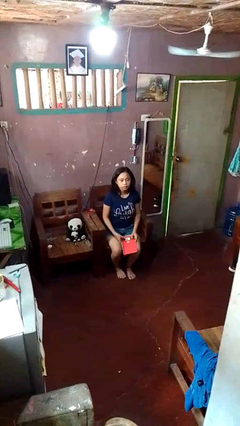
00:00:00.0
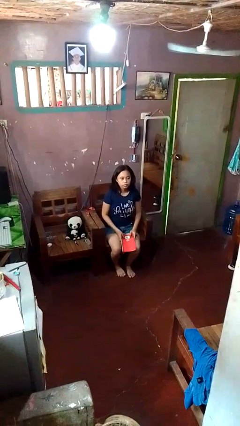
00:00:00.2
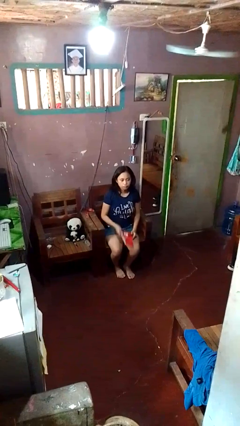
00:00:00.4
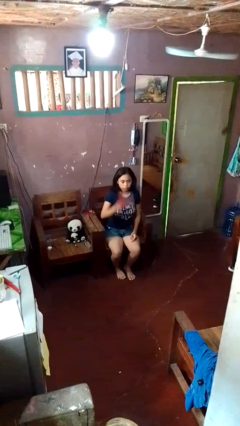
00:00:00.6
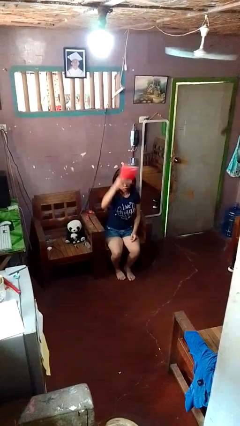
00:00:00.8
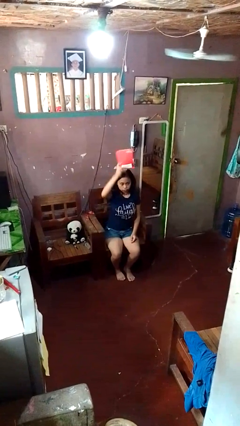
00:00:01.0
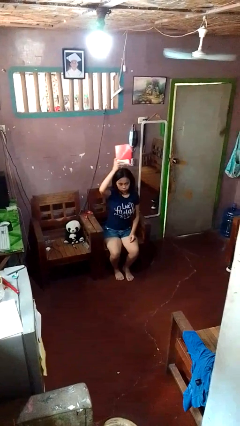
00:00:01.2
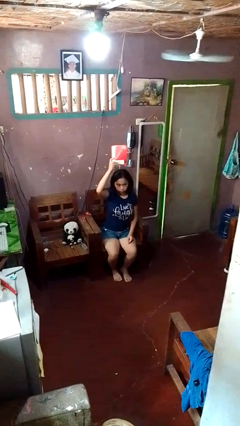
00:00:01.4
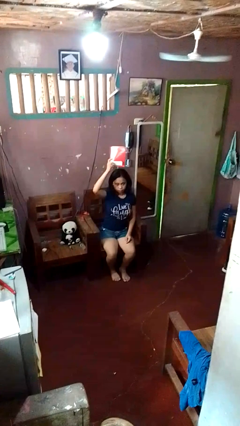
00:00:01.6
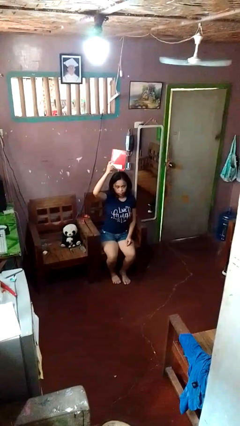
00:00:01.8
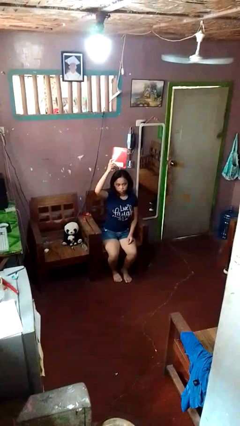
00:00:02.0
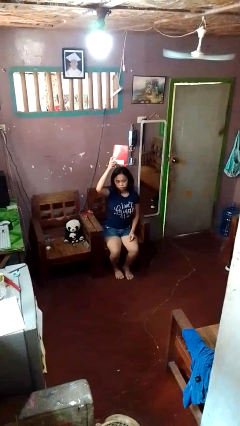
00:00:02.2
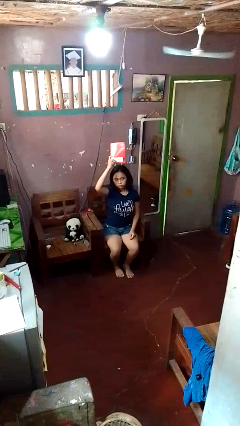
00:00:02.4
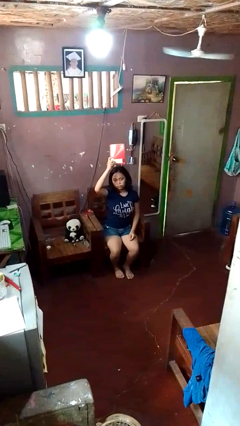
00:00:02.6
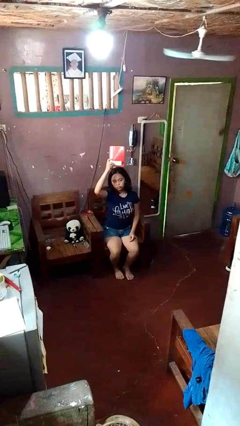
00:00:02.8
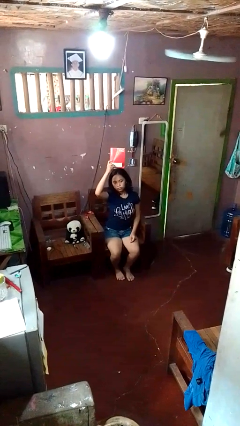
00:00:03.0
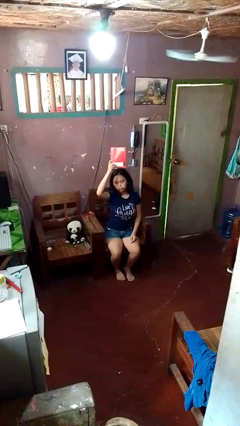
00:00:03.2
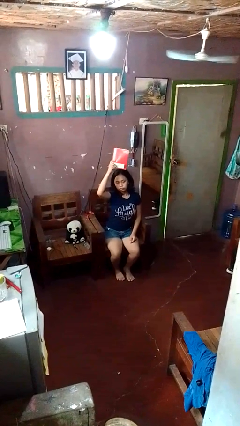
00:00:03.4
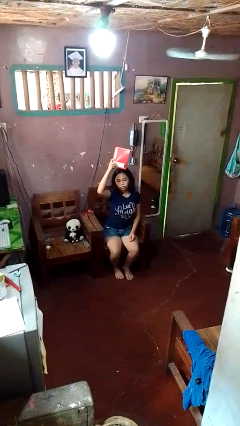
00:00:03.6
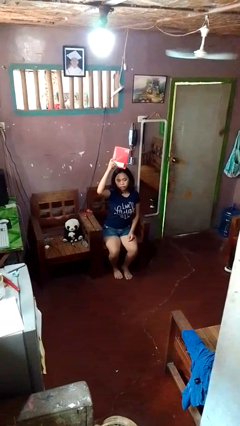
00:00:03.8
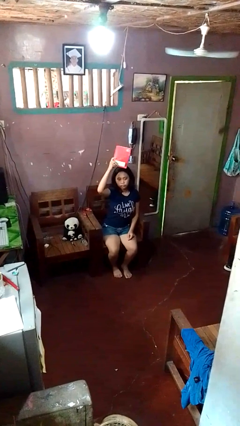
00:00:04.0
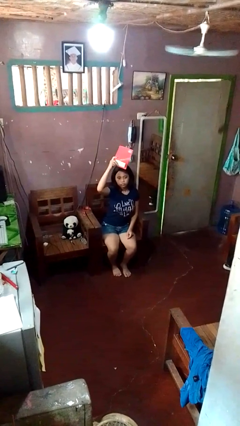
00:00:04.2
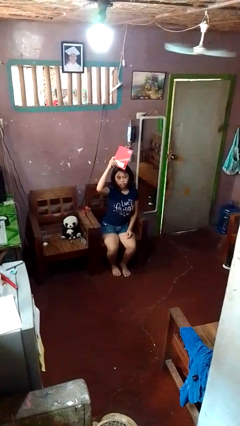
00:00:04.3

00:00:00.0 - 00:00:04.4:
person holds object above head

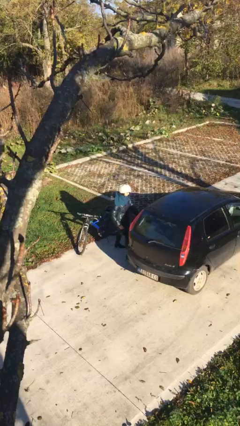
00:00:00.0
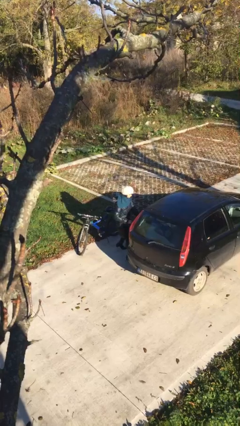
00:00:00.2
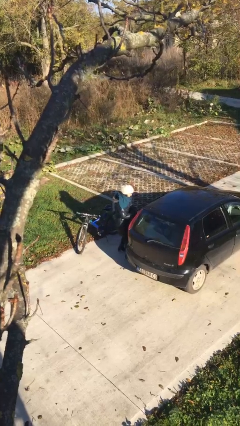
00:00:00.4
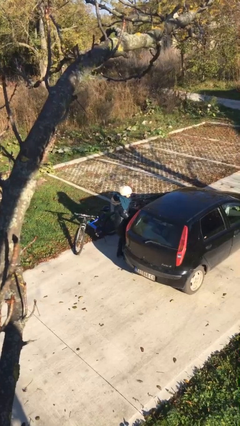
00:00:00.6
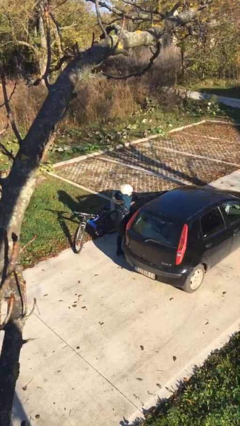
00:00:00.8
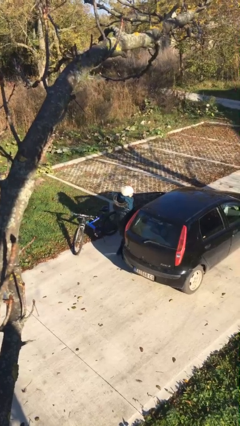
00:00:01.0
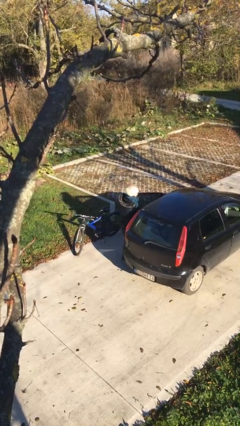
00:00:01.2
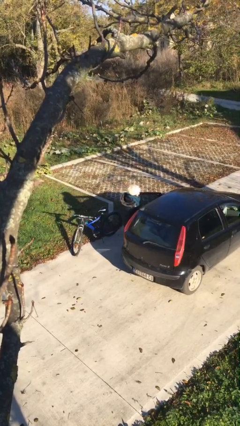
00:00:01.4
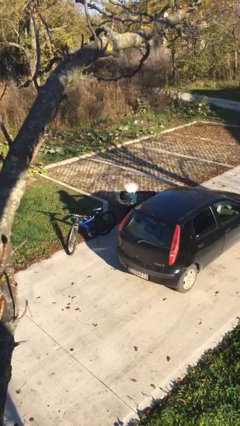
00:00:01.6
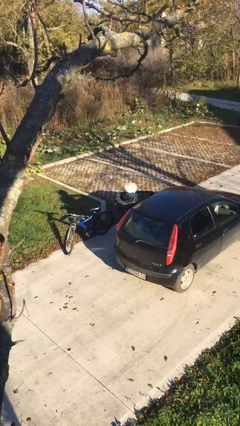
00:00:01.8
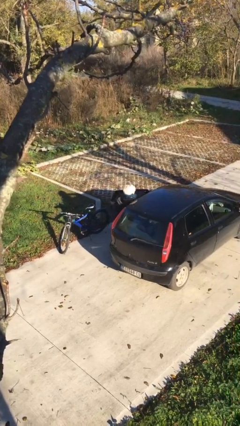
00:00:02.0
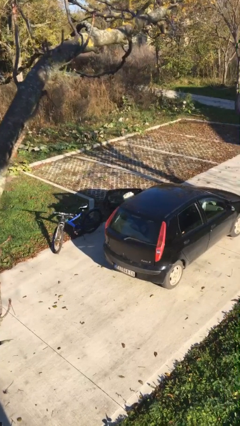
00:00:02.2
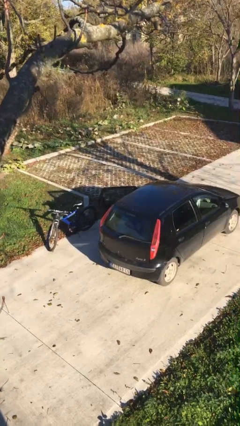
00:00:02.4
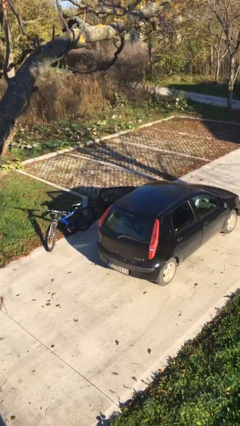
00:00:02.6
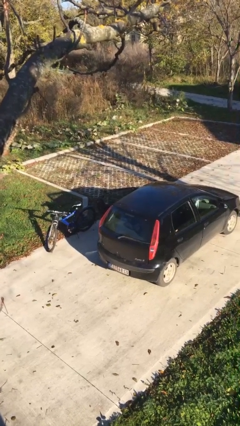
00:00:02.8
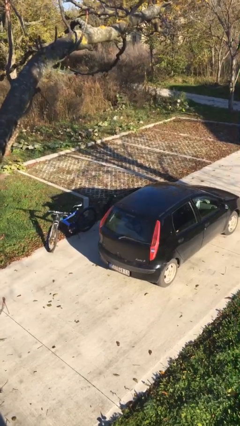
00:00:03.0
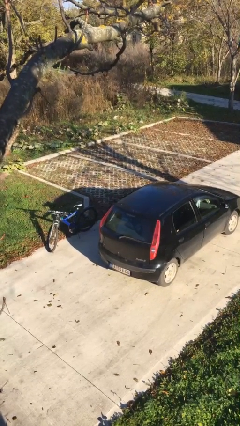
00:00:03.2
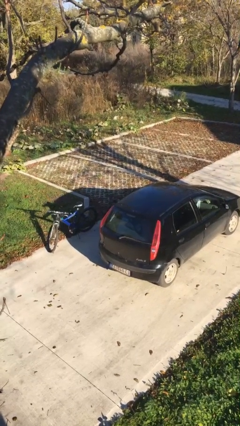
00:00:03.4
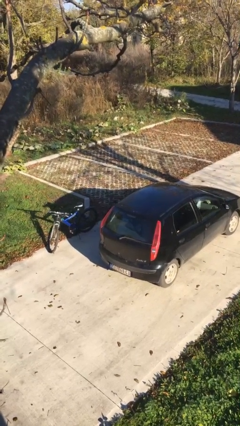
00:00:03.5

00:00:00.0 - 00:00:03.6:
person enters car

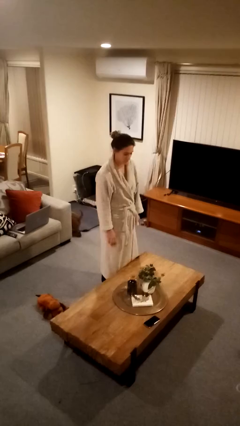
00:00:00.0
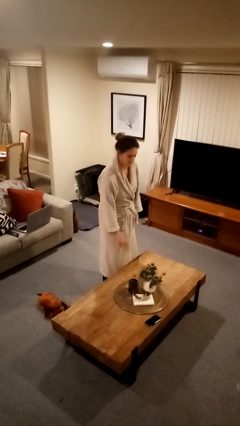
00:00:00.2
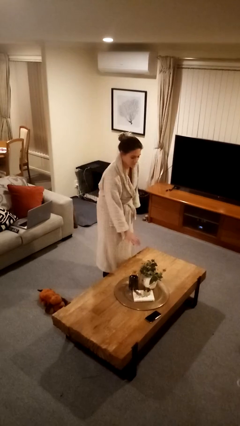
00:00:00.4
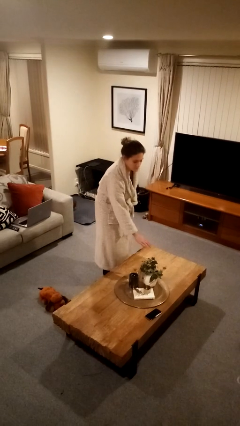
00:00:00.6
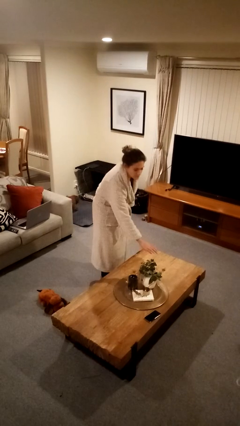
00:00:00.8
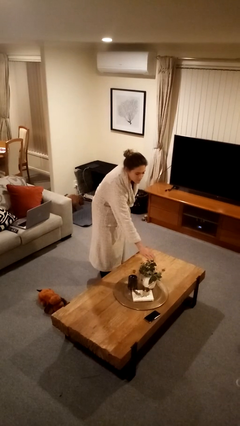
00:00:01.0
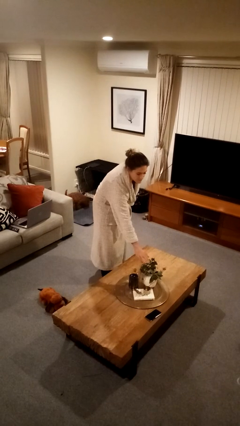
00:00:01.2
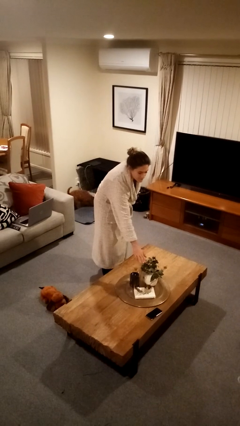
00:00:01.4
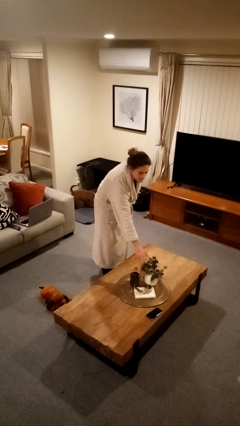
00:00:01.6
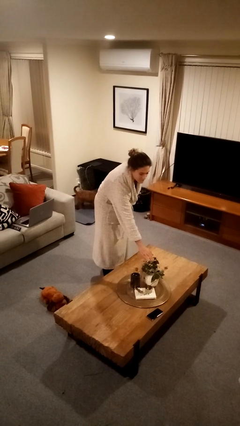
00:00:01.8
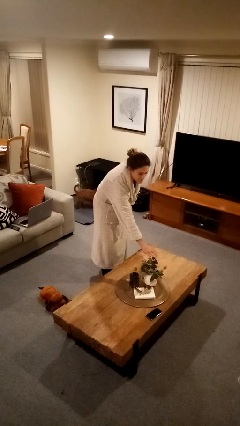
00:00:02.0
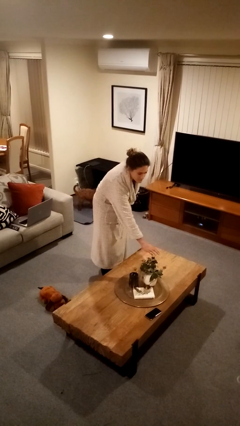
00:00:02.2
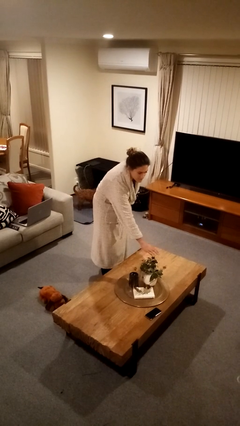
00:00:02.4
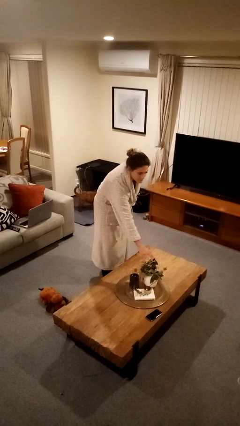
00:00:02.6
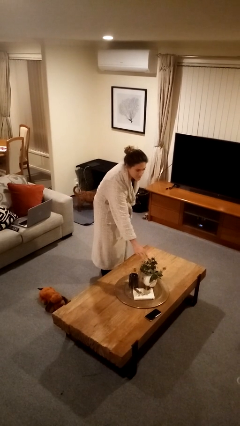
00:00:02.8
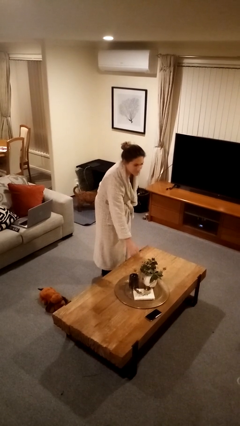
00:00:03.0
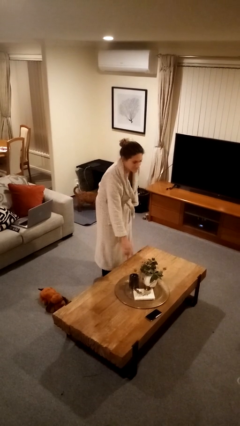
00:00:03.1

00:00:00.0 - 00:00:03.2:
person waves hand over object

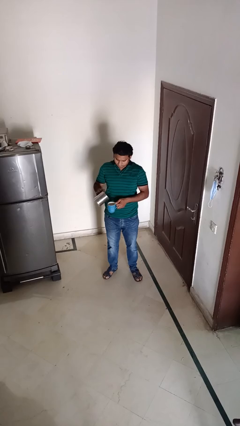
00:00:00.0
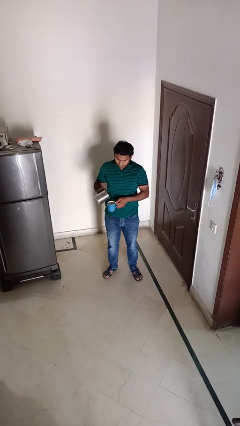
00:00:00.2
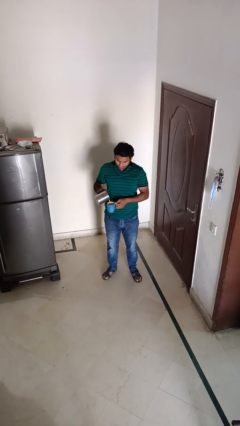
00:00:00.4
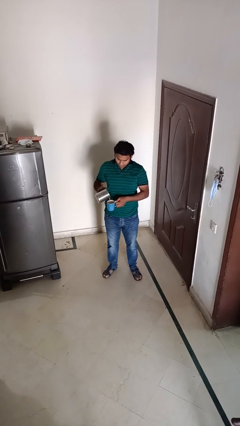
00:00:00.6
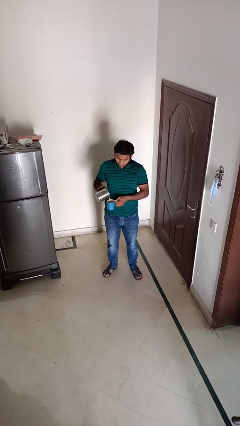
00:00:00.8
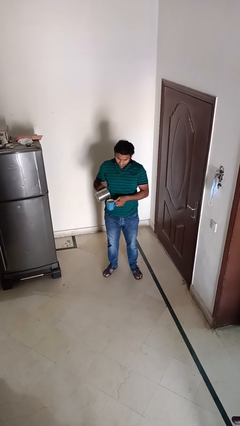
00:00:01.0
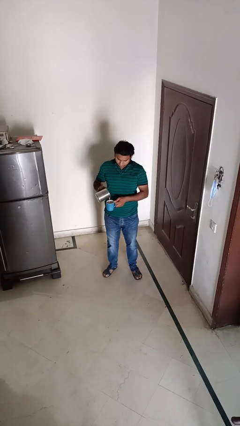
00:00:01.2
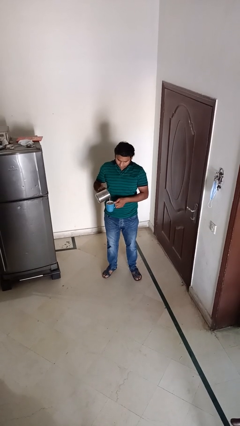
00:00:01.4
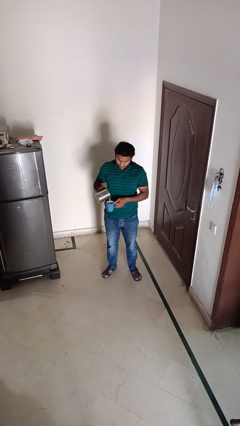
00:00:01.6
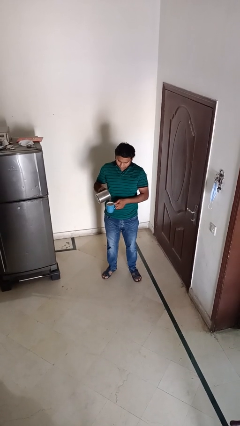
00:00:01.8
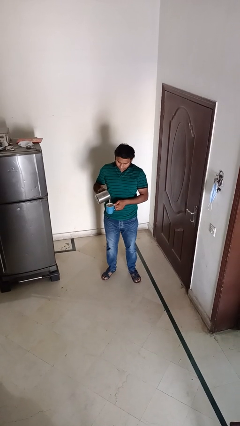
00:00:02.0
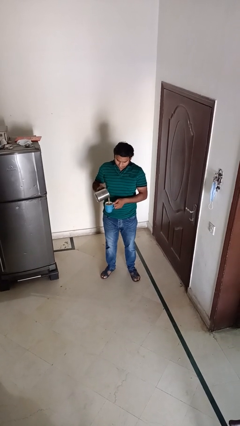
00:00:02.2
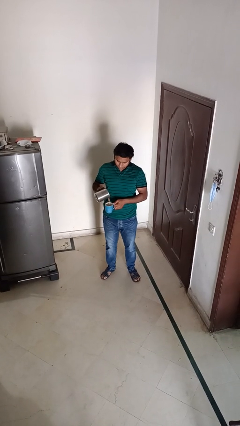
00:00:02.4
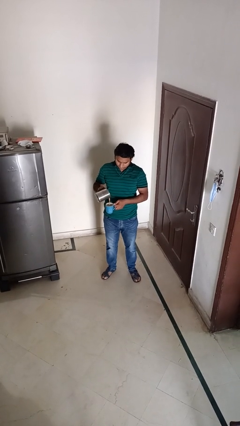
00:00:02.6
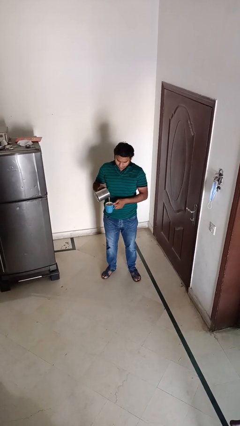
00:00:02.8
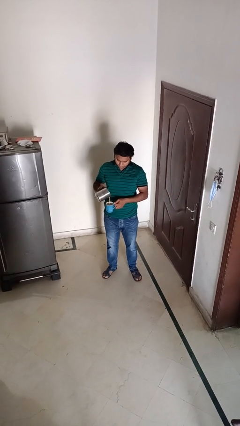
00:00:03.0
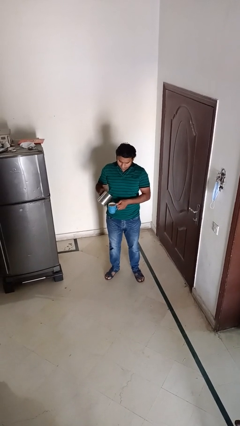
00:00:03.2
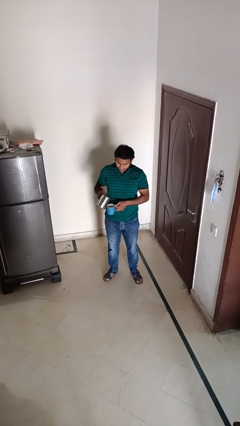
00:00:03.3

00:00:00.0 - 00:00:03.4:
person pours coffee into mug

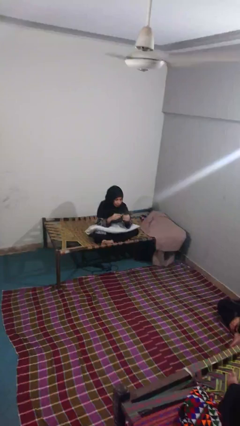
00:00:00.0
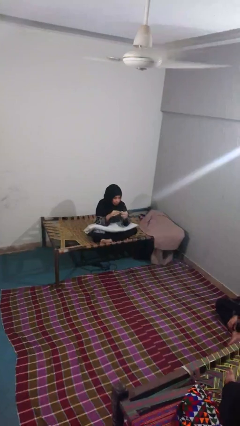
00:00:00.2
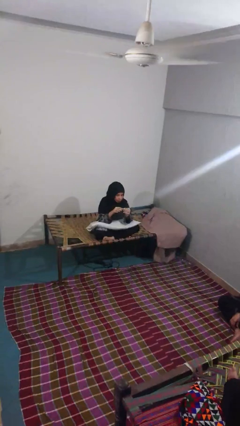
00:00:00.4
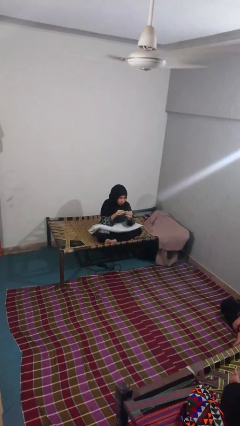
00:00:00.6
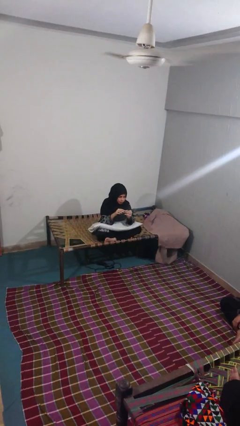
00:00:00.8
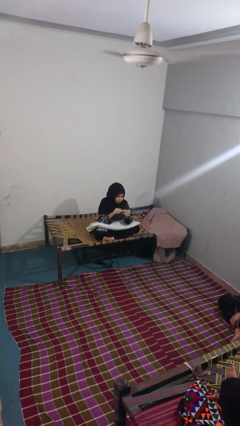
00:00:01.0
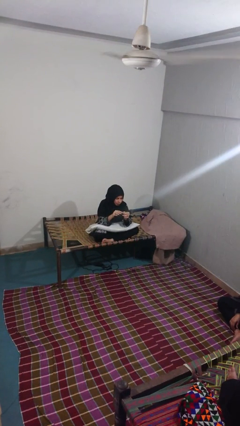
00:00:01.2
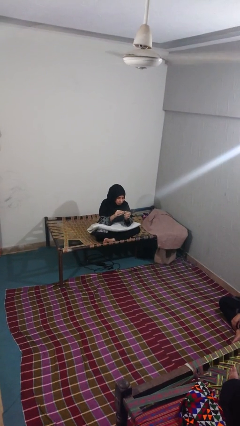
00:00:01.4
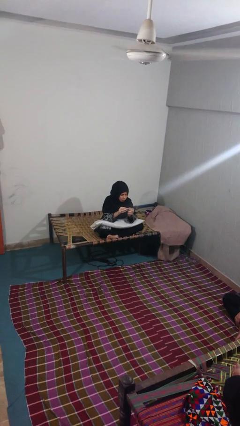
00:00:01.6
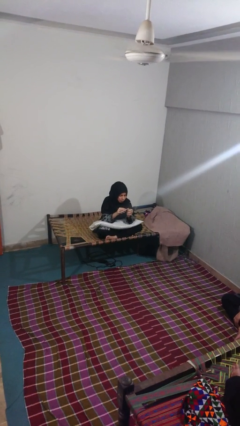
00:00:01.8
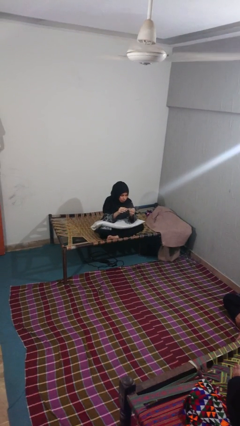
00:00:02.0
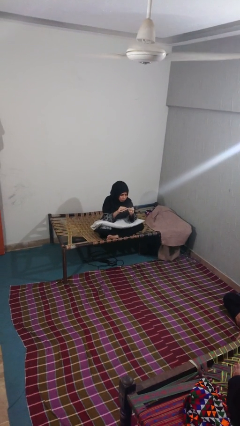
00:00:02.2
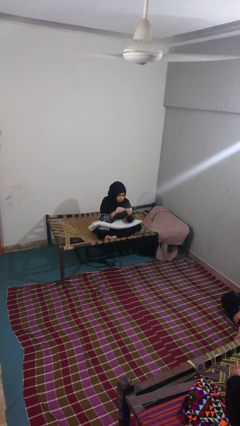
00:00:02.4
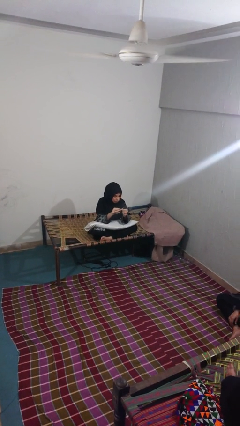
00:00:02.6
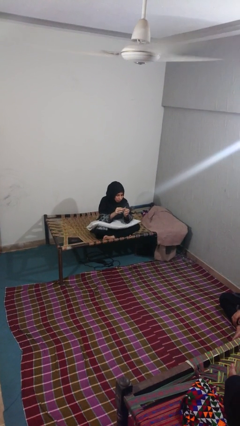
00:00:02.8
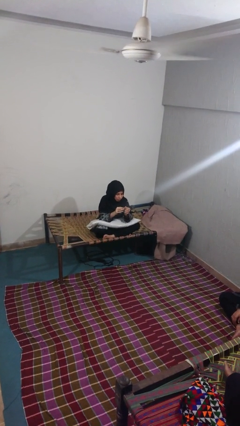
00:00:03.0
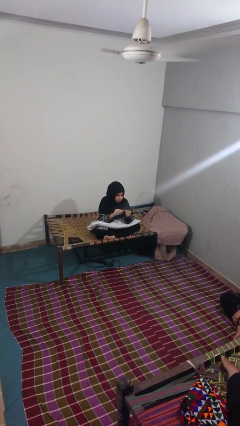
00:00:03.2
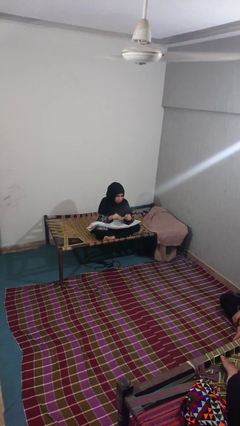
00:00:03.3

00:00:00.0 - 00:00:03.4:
person files fingernails
